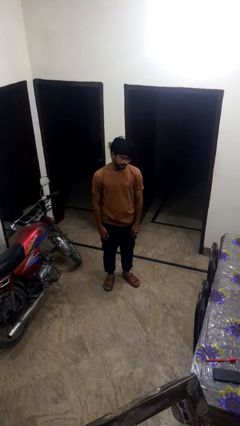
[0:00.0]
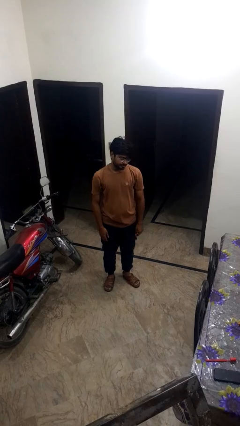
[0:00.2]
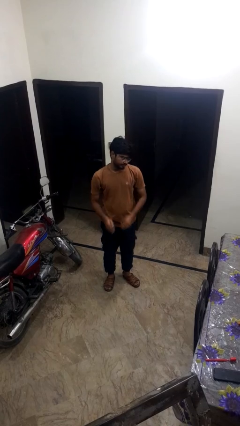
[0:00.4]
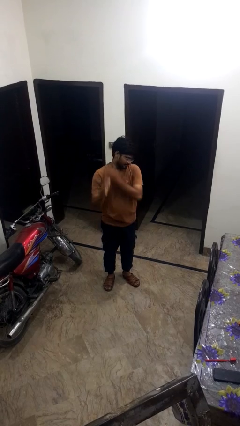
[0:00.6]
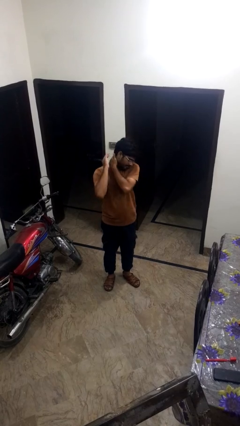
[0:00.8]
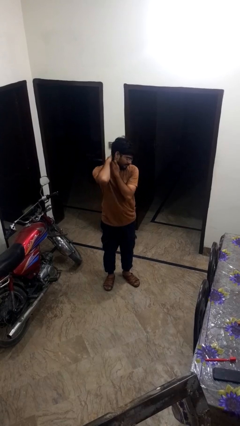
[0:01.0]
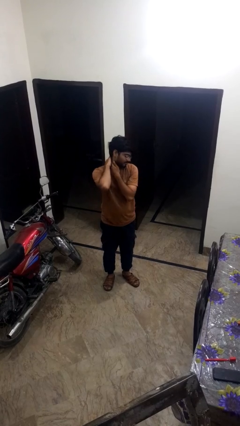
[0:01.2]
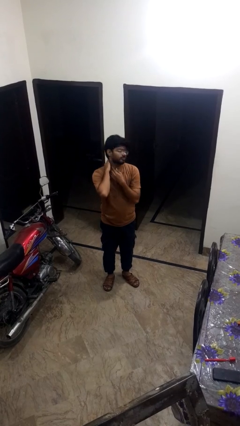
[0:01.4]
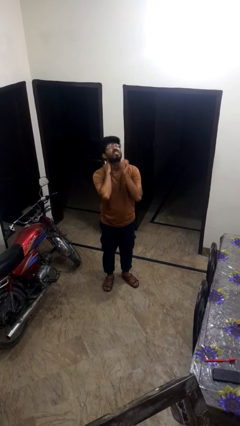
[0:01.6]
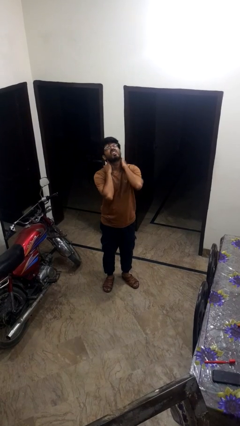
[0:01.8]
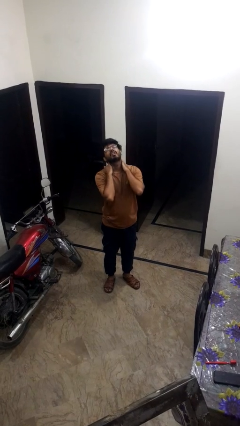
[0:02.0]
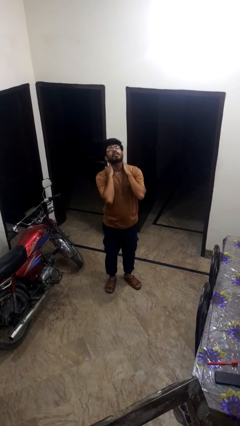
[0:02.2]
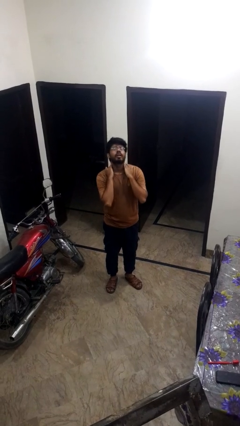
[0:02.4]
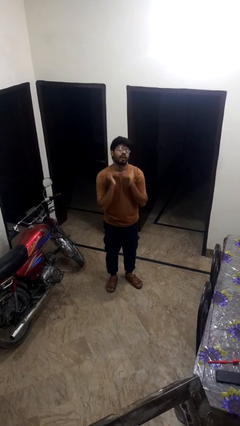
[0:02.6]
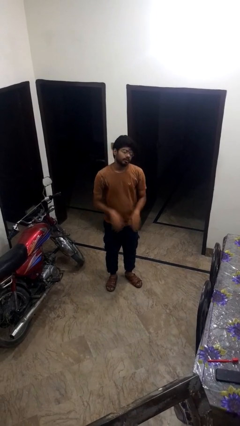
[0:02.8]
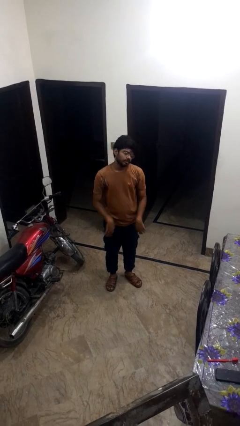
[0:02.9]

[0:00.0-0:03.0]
person rubs neck

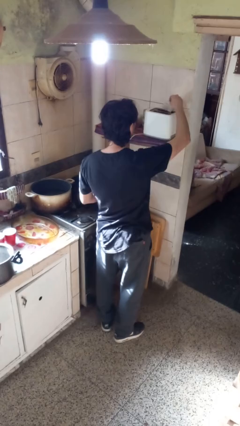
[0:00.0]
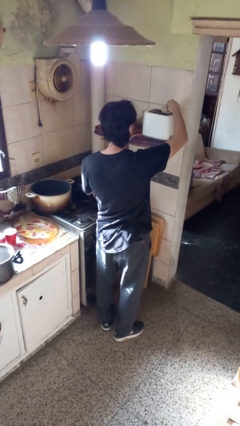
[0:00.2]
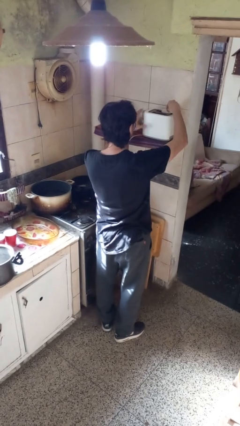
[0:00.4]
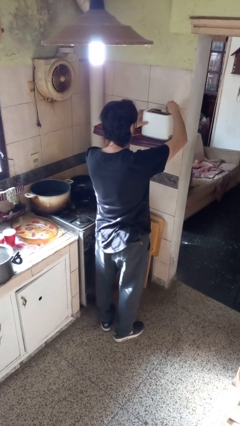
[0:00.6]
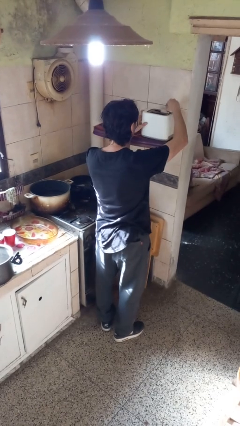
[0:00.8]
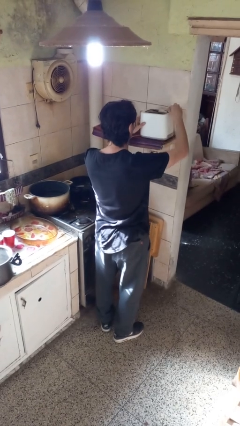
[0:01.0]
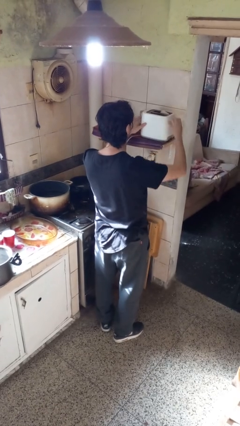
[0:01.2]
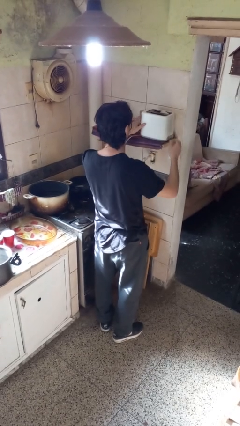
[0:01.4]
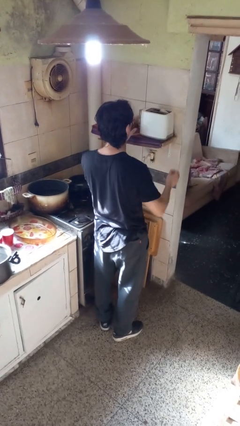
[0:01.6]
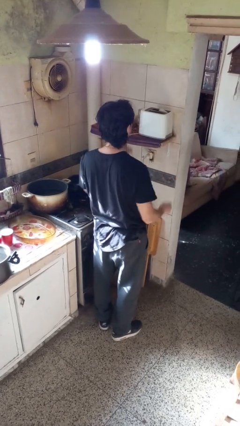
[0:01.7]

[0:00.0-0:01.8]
person puts object into toaster

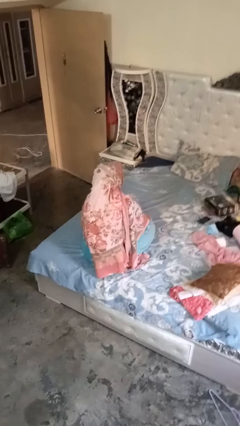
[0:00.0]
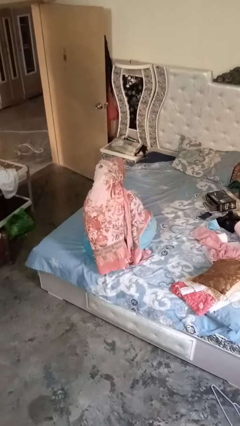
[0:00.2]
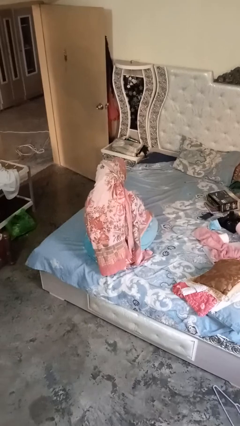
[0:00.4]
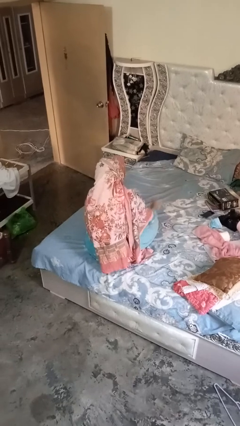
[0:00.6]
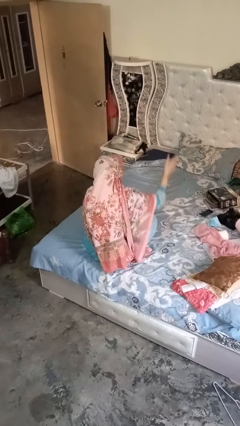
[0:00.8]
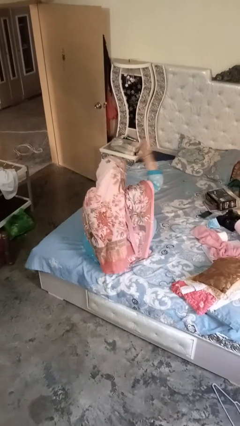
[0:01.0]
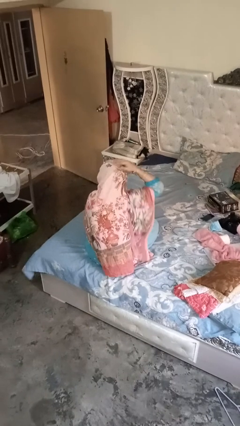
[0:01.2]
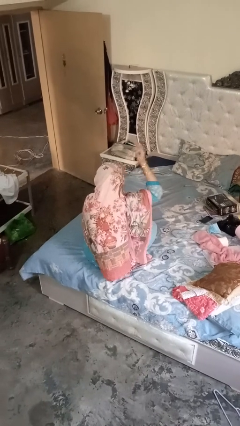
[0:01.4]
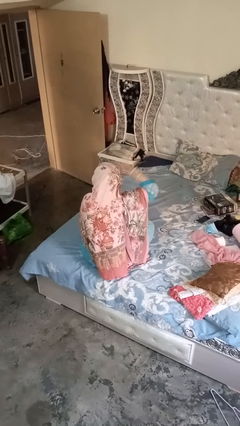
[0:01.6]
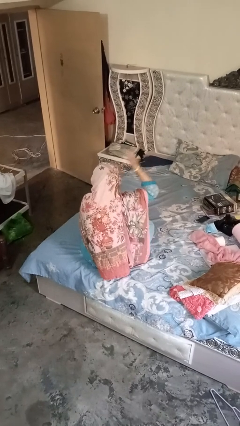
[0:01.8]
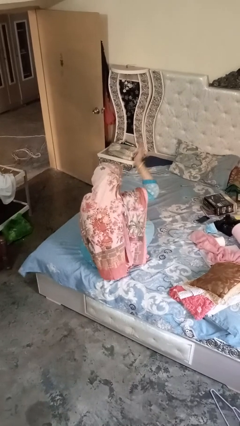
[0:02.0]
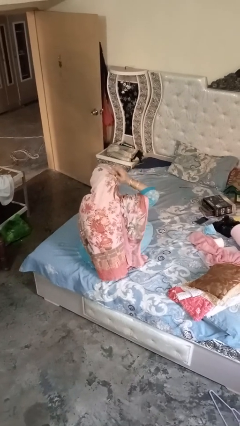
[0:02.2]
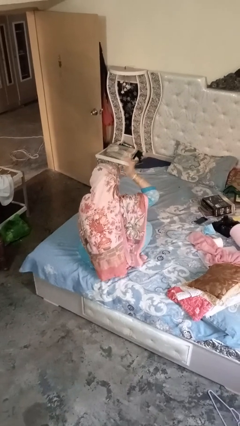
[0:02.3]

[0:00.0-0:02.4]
person pats head

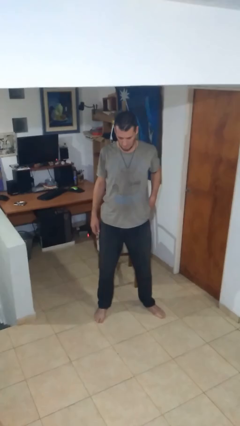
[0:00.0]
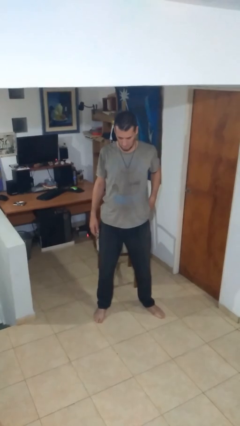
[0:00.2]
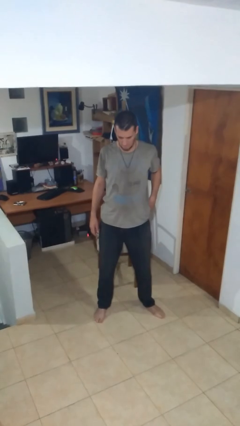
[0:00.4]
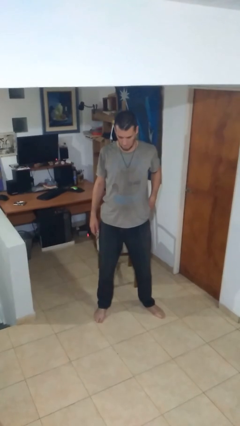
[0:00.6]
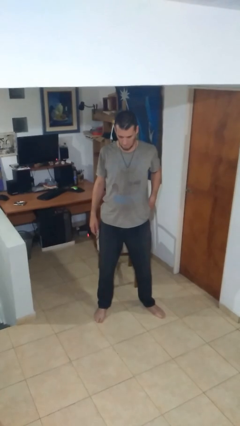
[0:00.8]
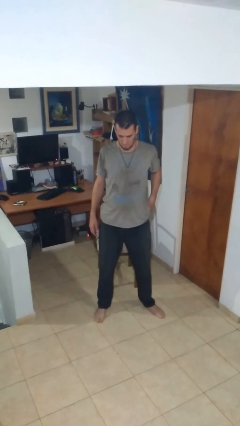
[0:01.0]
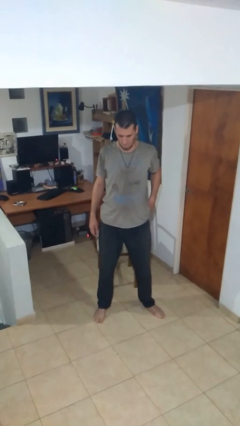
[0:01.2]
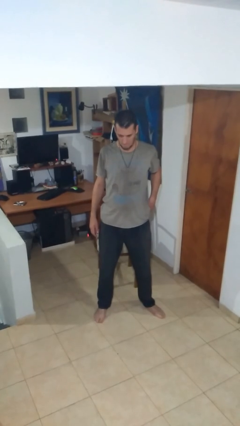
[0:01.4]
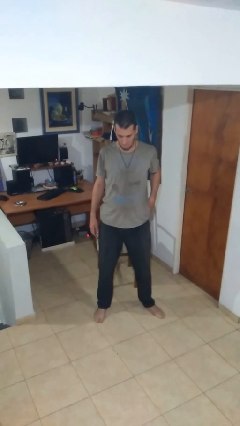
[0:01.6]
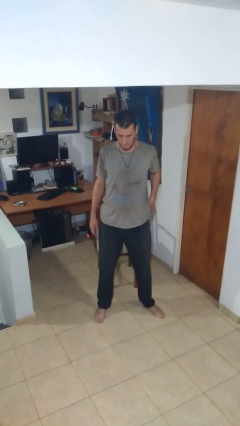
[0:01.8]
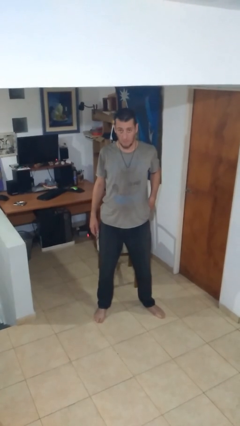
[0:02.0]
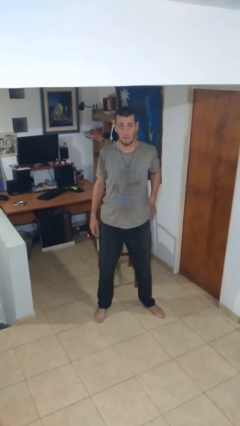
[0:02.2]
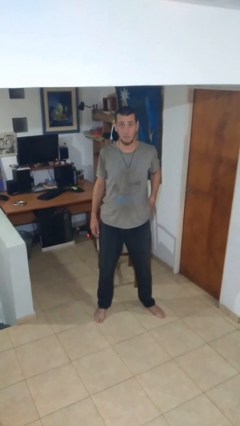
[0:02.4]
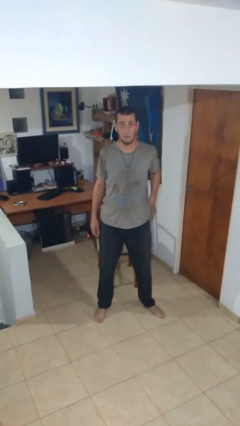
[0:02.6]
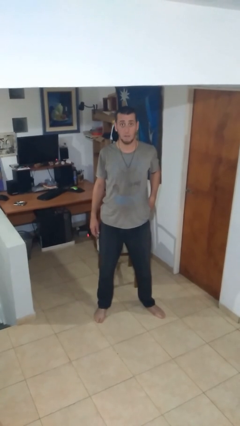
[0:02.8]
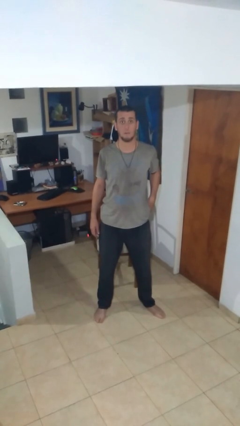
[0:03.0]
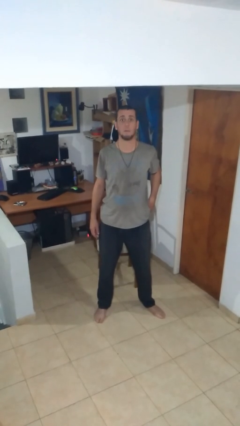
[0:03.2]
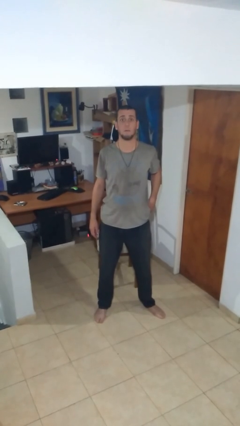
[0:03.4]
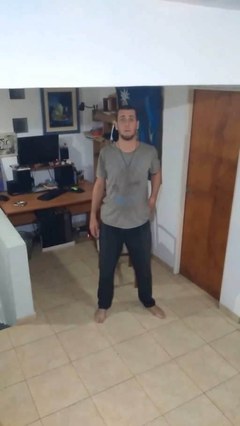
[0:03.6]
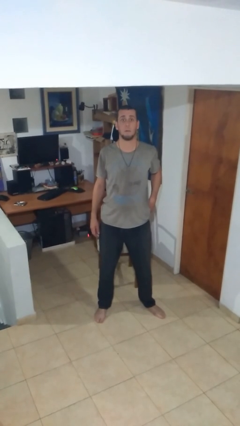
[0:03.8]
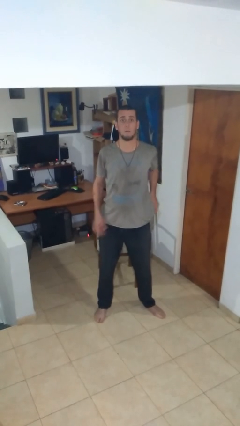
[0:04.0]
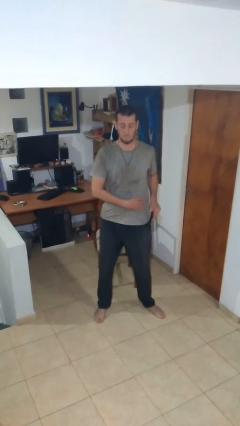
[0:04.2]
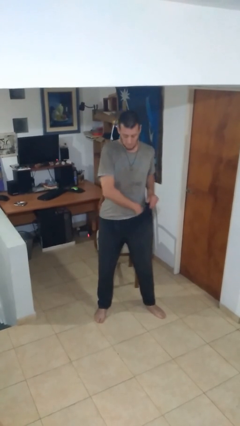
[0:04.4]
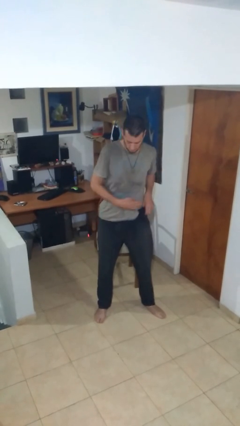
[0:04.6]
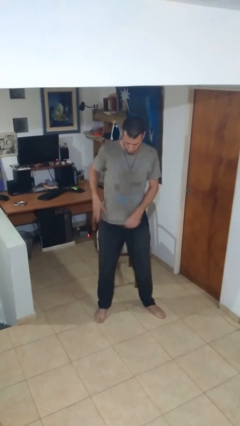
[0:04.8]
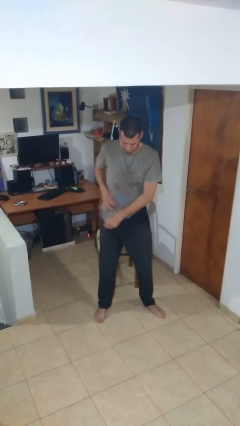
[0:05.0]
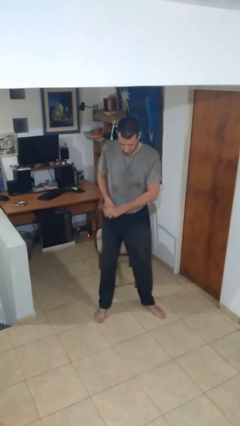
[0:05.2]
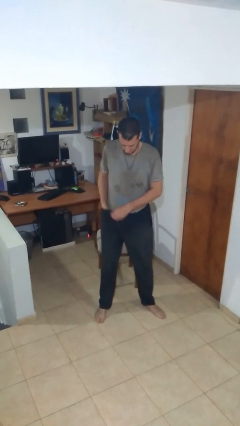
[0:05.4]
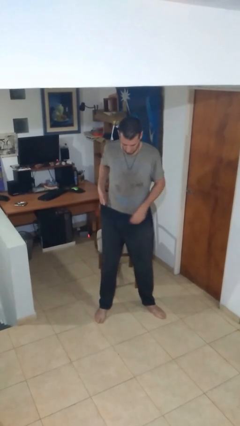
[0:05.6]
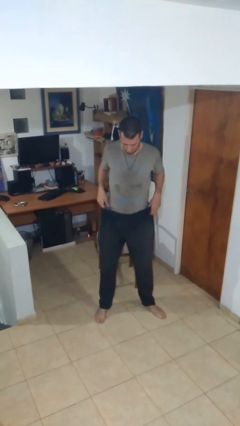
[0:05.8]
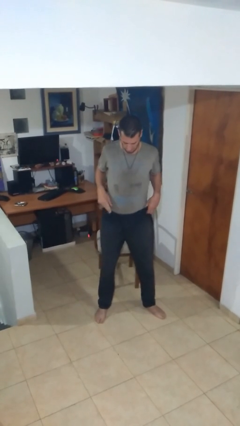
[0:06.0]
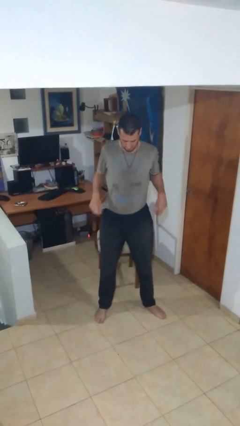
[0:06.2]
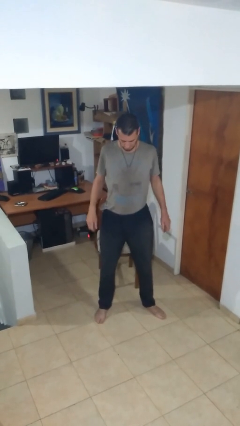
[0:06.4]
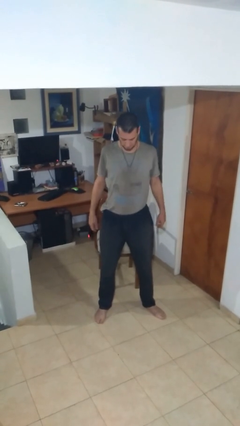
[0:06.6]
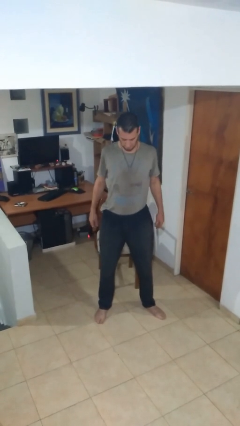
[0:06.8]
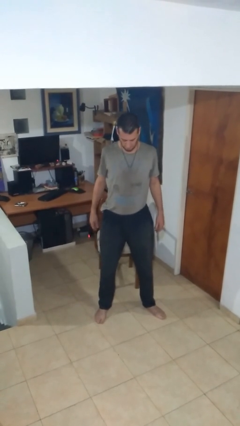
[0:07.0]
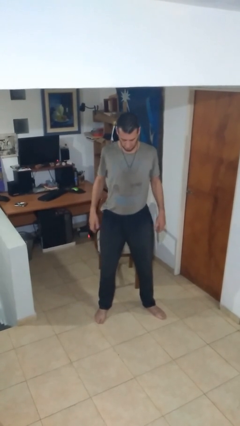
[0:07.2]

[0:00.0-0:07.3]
person tucks in shirt

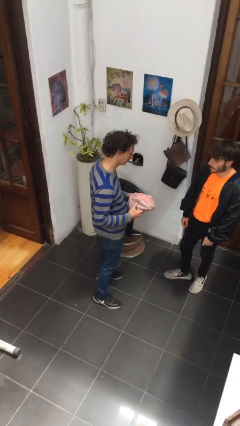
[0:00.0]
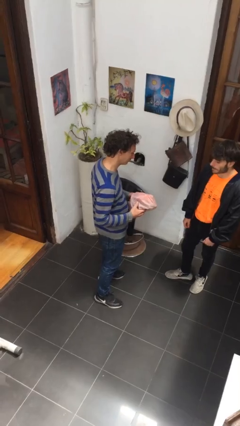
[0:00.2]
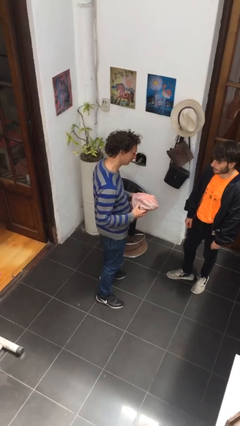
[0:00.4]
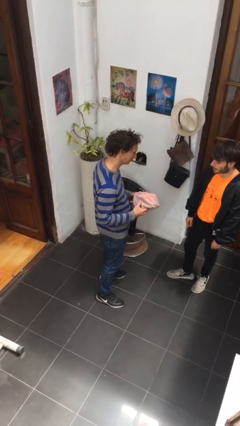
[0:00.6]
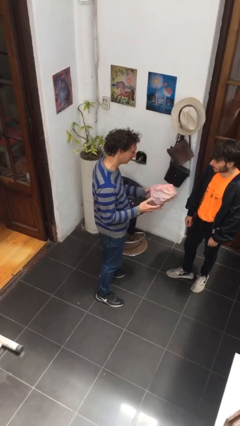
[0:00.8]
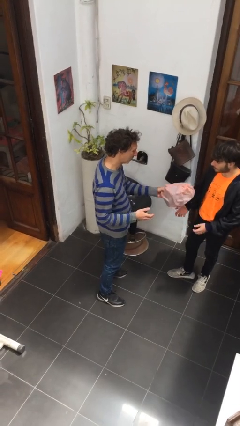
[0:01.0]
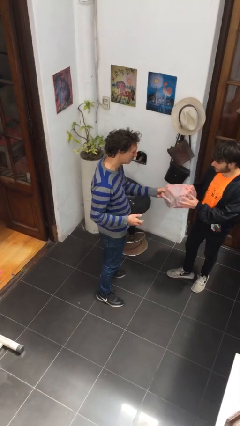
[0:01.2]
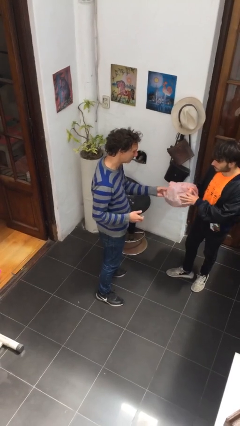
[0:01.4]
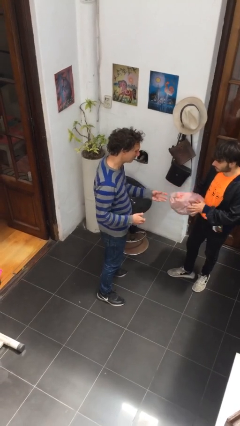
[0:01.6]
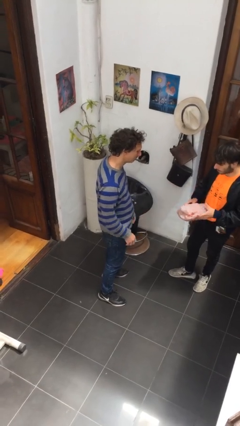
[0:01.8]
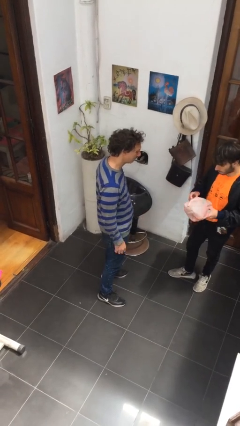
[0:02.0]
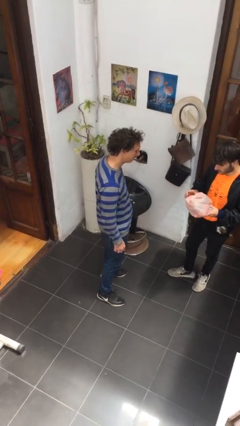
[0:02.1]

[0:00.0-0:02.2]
person transfers object to person

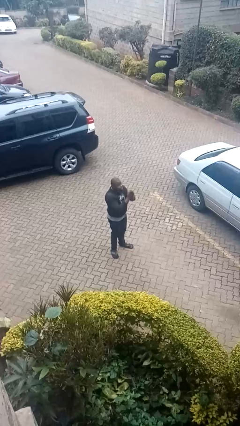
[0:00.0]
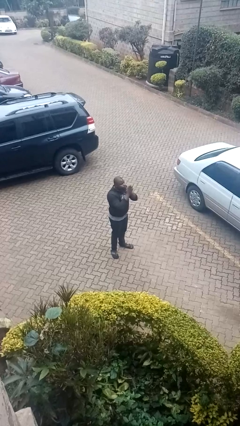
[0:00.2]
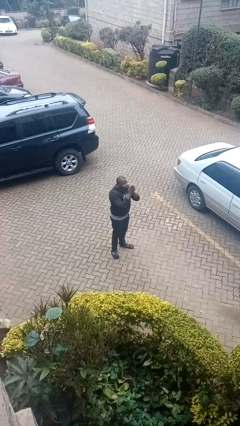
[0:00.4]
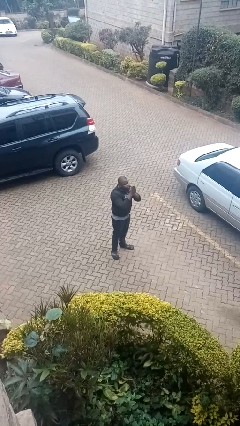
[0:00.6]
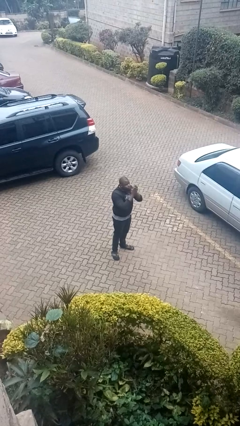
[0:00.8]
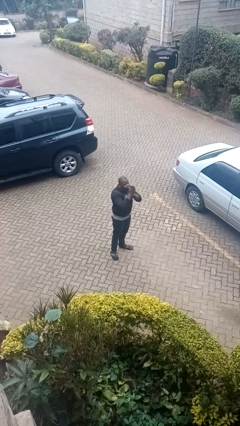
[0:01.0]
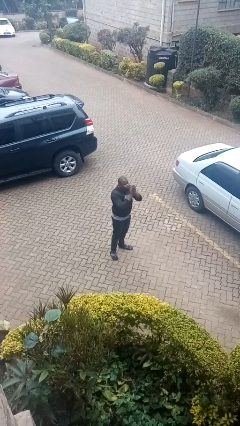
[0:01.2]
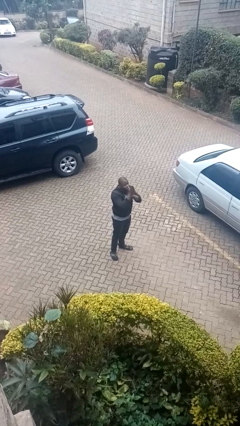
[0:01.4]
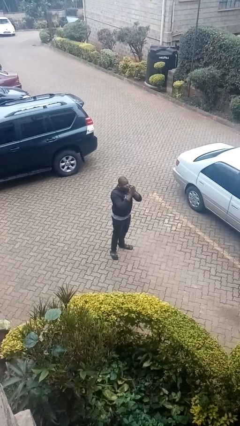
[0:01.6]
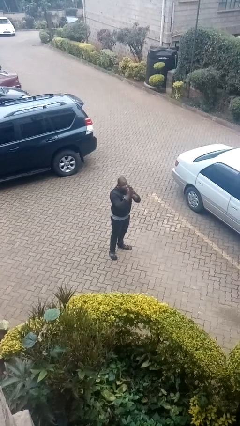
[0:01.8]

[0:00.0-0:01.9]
person blows into hands
